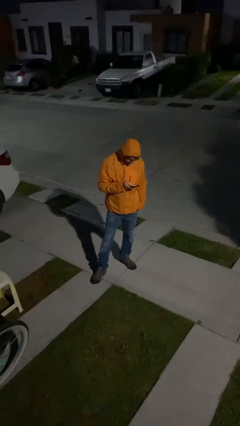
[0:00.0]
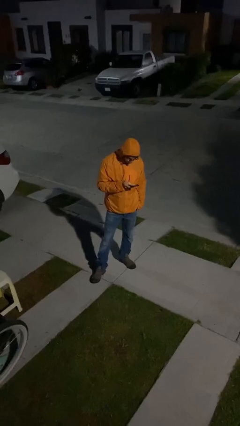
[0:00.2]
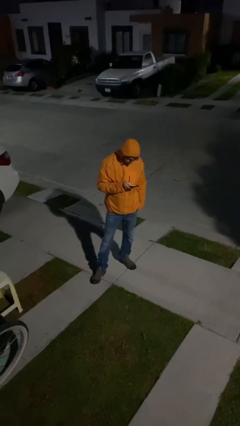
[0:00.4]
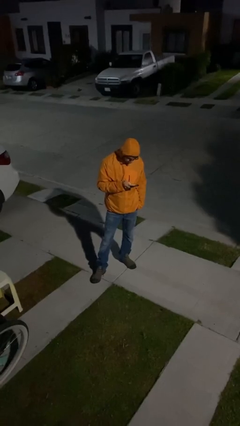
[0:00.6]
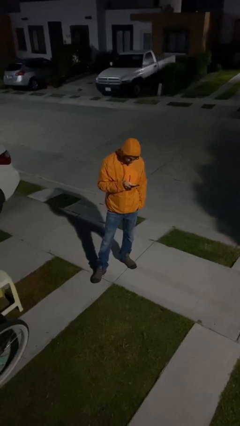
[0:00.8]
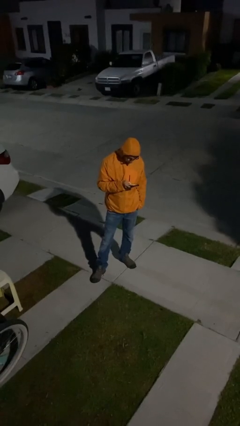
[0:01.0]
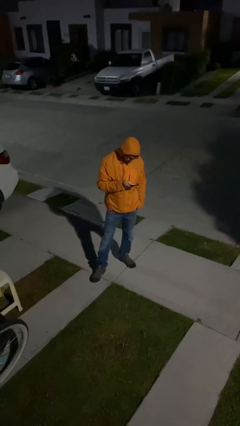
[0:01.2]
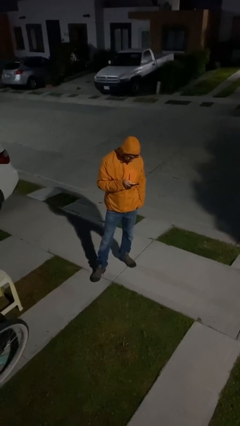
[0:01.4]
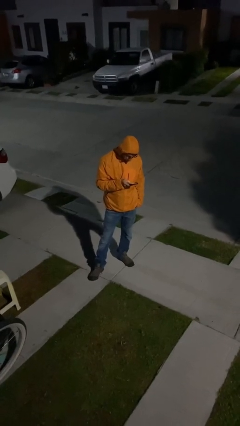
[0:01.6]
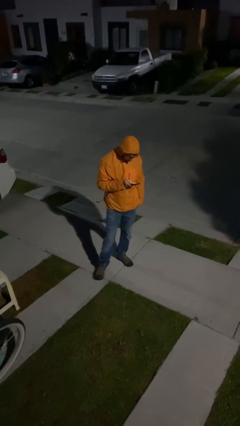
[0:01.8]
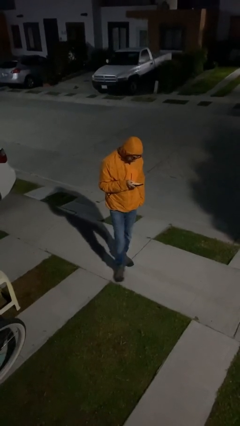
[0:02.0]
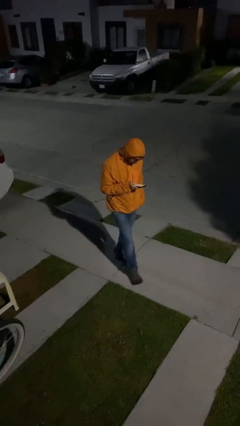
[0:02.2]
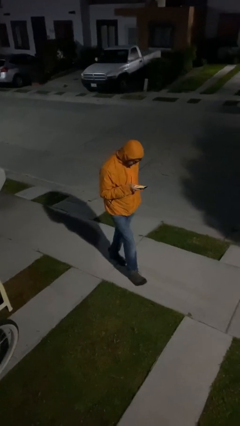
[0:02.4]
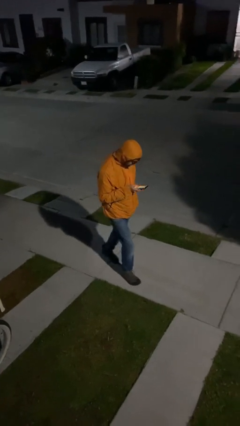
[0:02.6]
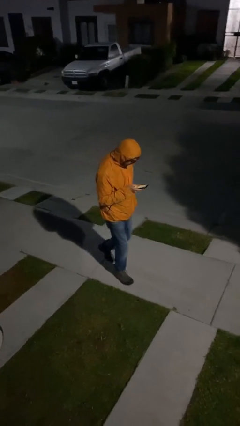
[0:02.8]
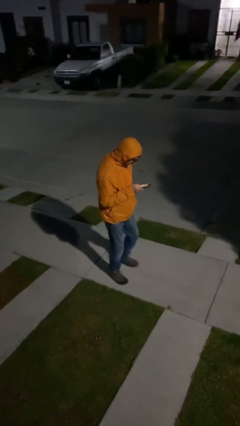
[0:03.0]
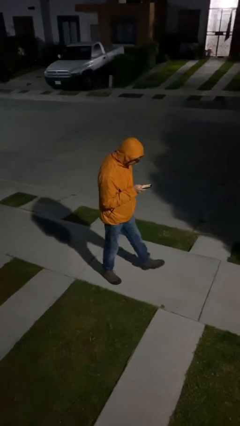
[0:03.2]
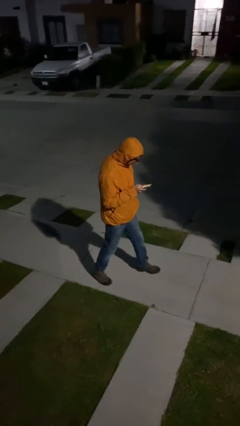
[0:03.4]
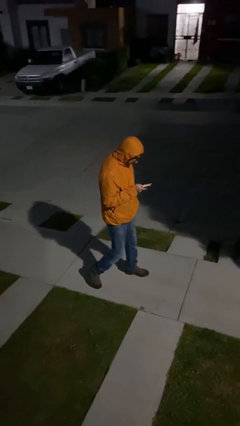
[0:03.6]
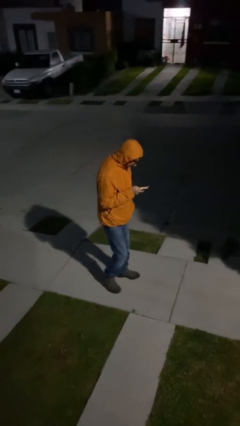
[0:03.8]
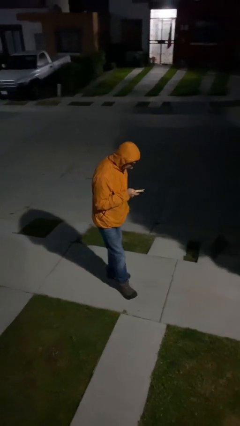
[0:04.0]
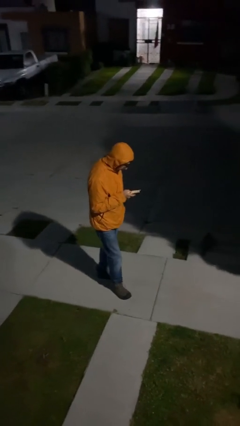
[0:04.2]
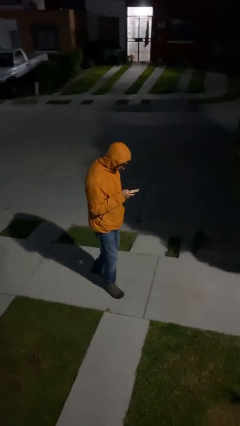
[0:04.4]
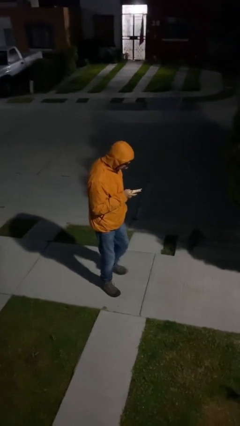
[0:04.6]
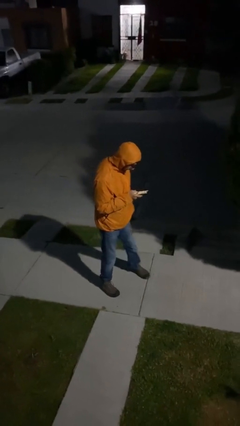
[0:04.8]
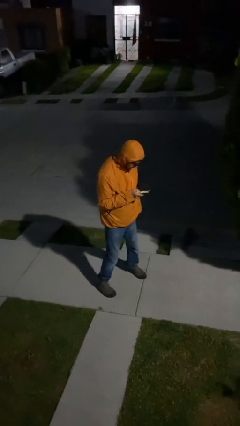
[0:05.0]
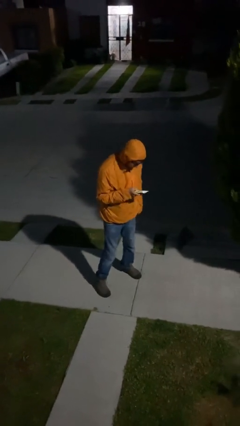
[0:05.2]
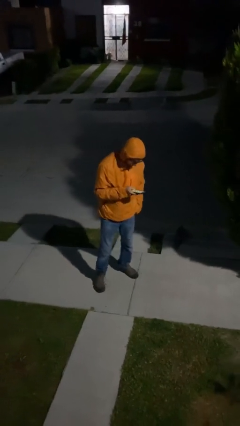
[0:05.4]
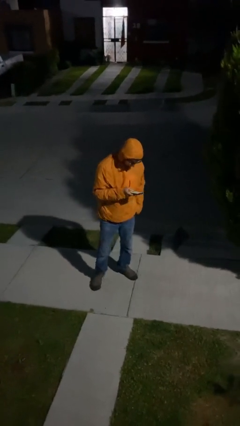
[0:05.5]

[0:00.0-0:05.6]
person texts on phone

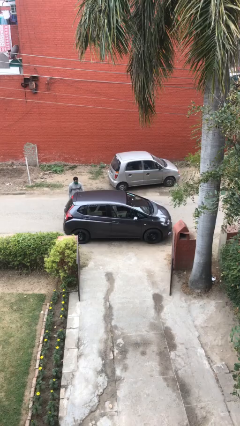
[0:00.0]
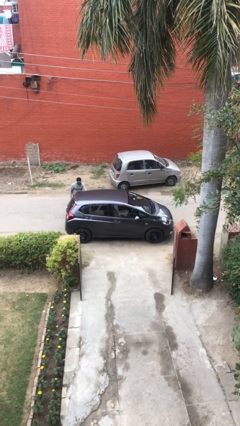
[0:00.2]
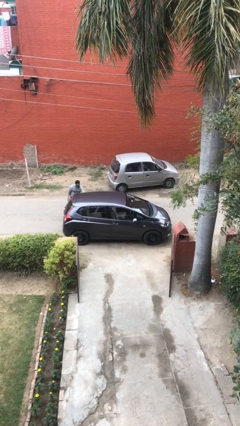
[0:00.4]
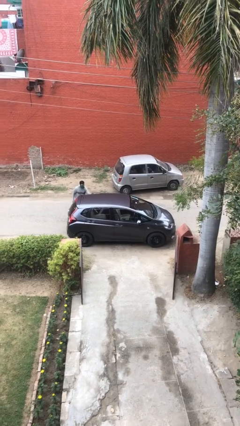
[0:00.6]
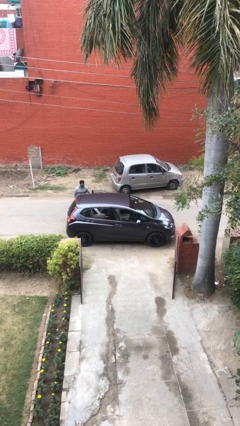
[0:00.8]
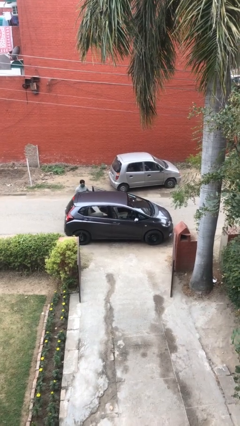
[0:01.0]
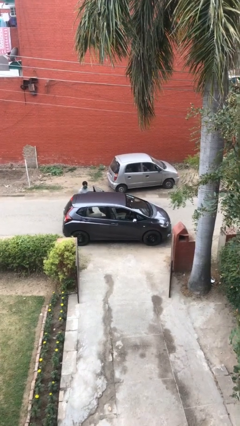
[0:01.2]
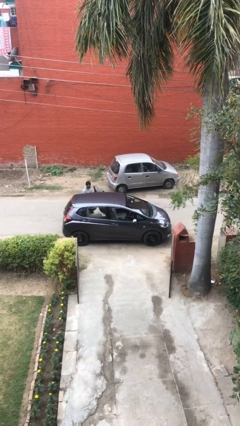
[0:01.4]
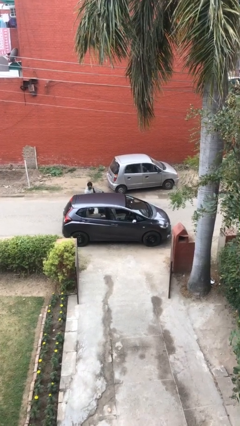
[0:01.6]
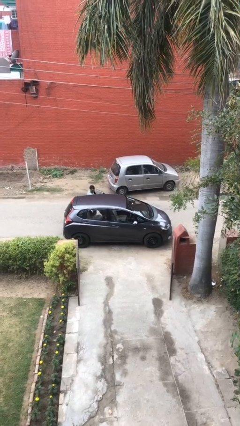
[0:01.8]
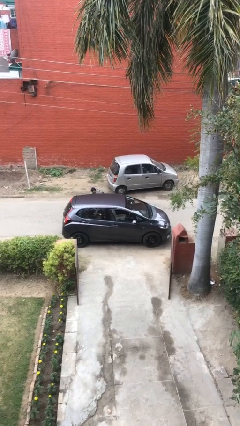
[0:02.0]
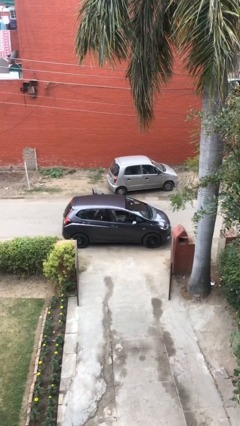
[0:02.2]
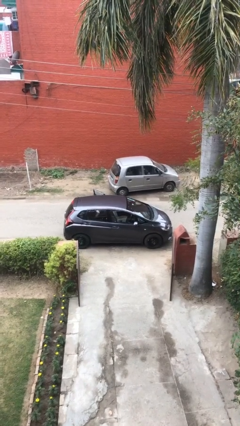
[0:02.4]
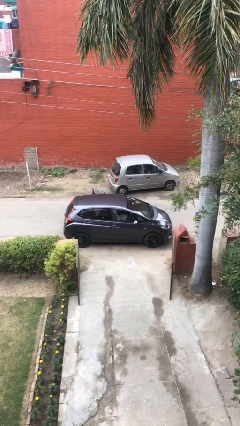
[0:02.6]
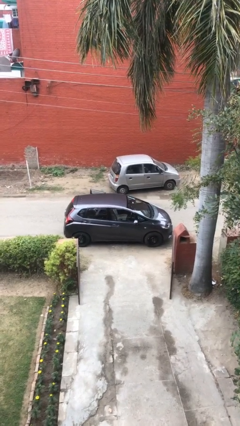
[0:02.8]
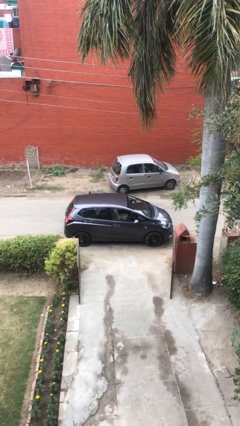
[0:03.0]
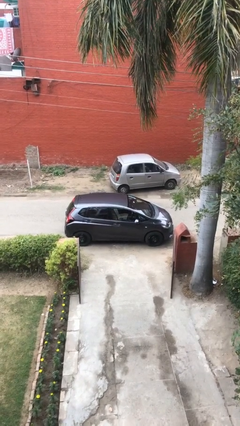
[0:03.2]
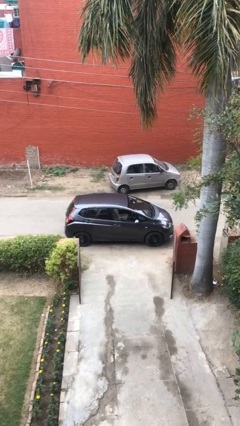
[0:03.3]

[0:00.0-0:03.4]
car picks up person

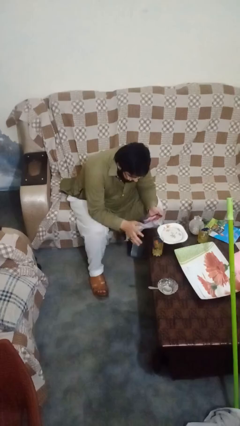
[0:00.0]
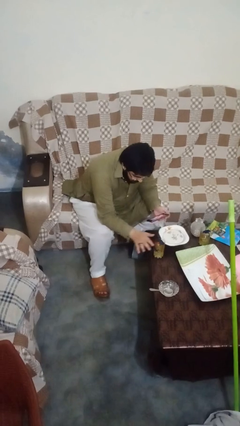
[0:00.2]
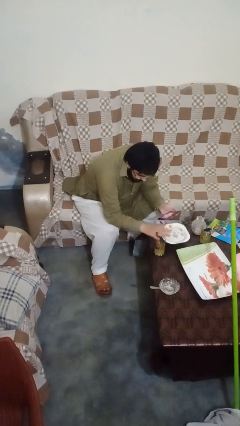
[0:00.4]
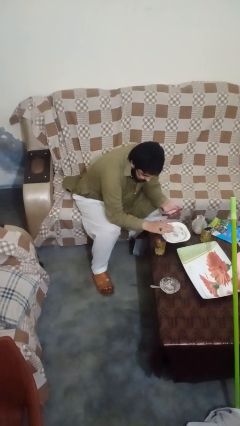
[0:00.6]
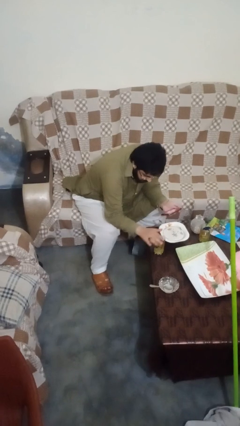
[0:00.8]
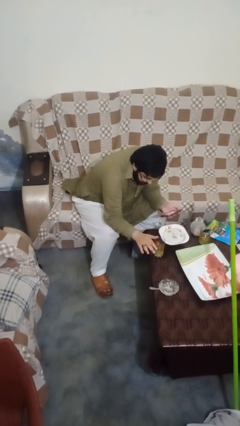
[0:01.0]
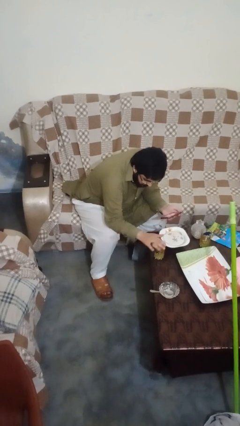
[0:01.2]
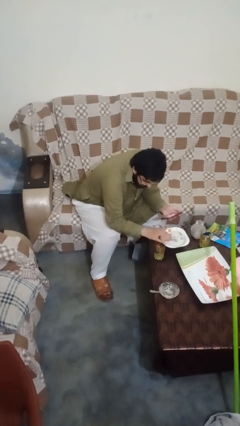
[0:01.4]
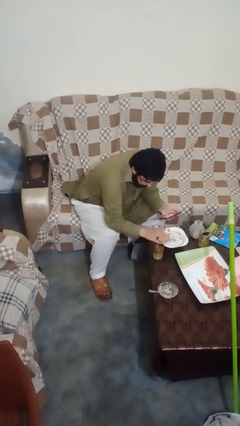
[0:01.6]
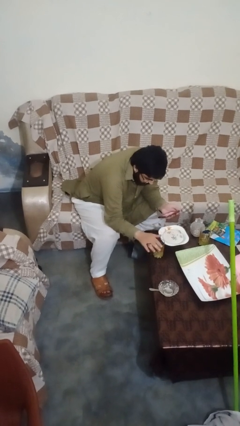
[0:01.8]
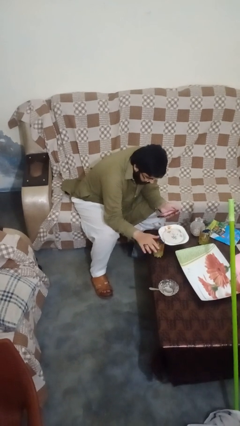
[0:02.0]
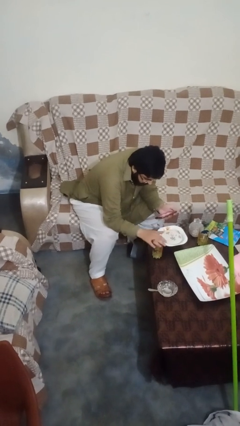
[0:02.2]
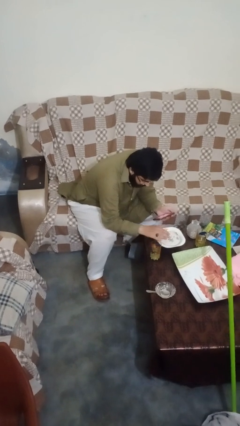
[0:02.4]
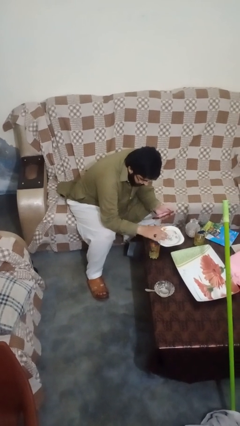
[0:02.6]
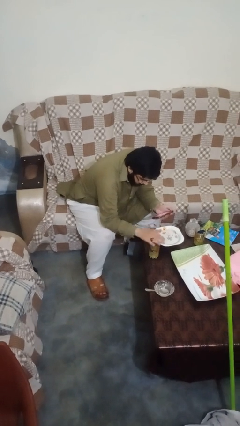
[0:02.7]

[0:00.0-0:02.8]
person waves hand over object

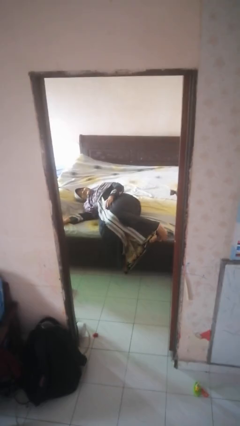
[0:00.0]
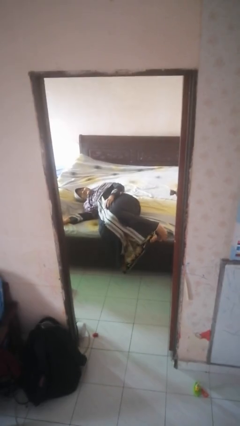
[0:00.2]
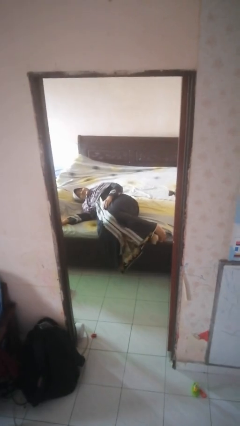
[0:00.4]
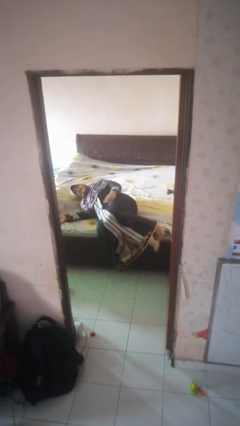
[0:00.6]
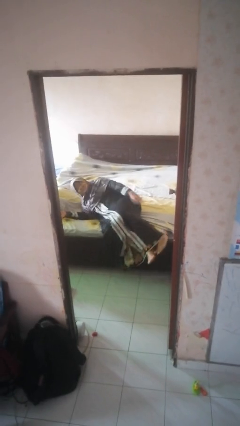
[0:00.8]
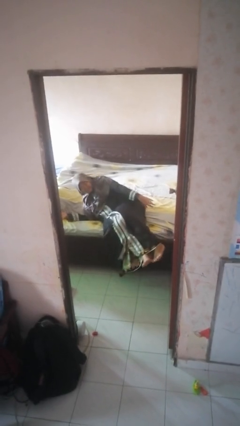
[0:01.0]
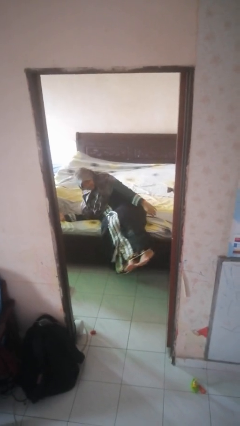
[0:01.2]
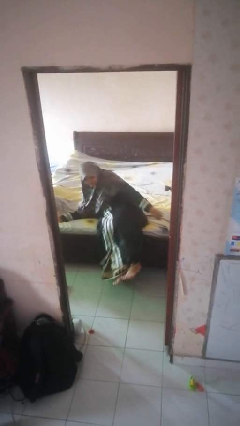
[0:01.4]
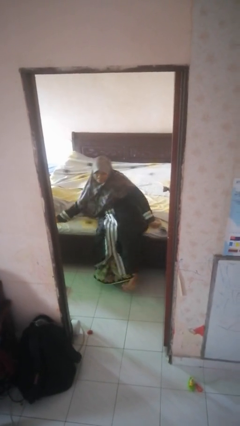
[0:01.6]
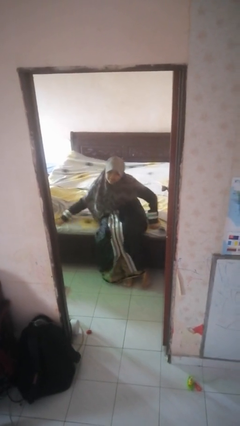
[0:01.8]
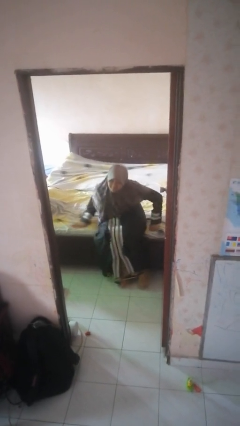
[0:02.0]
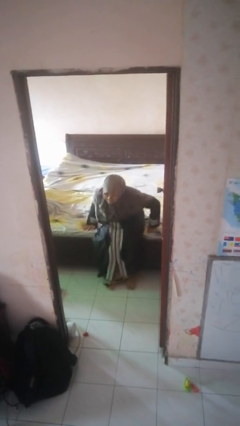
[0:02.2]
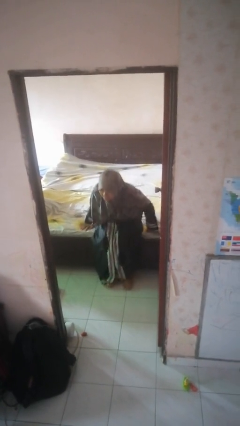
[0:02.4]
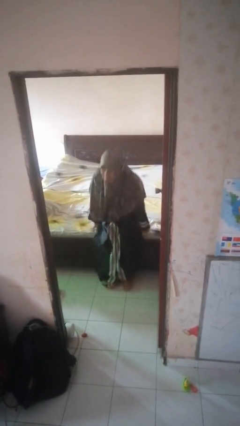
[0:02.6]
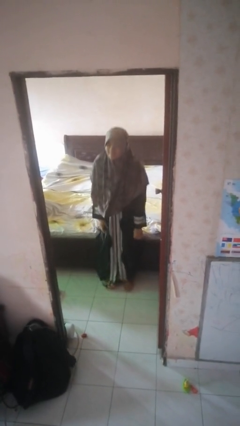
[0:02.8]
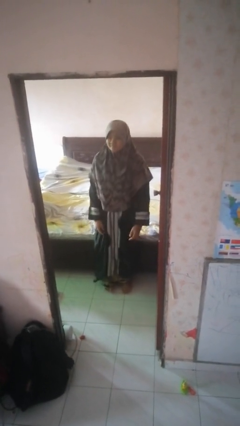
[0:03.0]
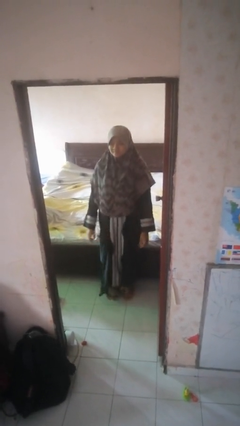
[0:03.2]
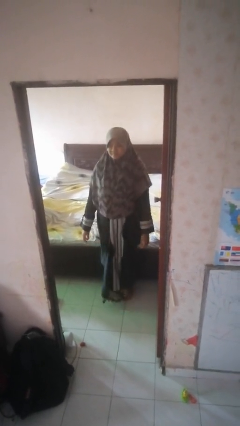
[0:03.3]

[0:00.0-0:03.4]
person stands up

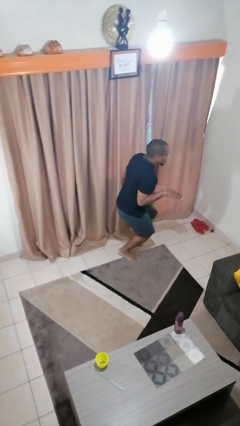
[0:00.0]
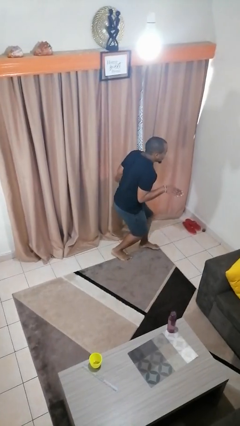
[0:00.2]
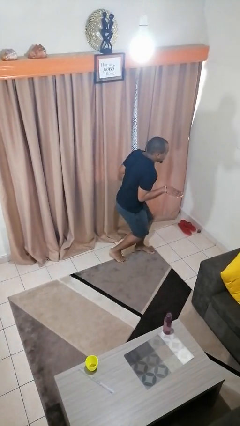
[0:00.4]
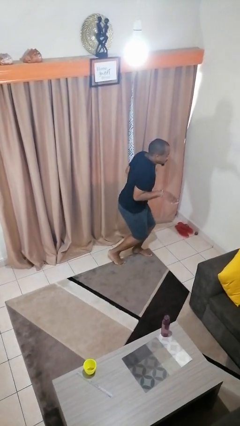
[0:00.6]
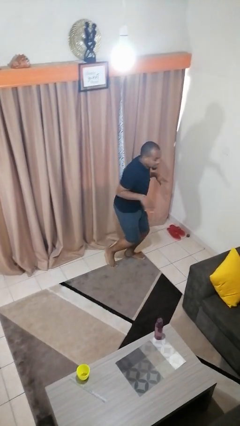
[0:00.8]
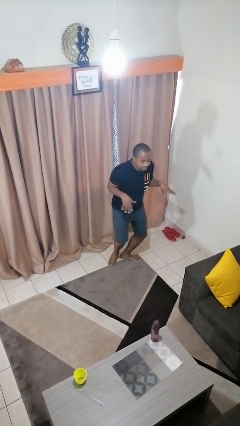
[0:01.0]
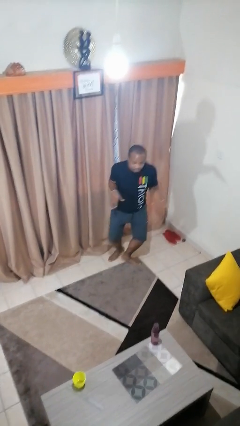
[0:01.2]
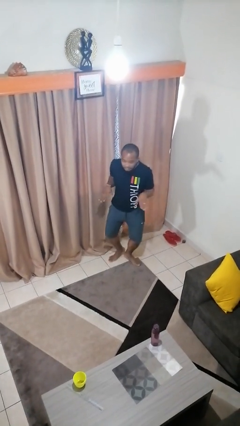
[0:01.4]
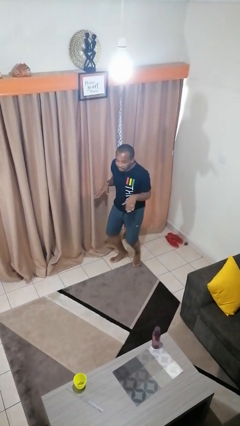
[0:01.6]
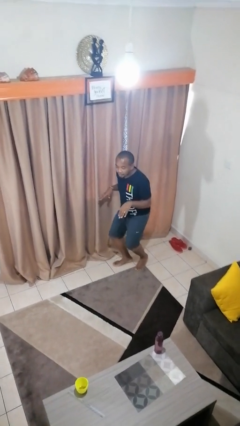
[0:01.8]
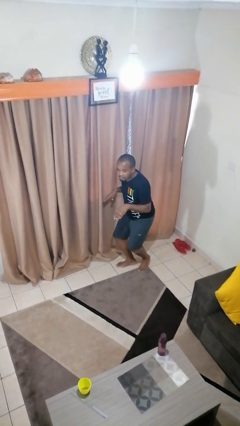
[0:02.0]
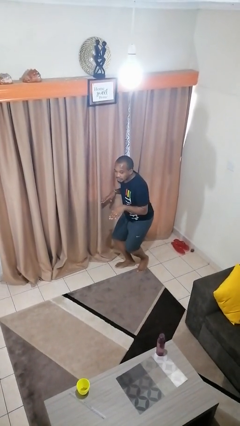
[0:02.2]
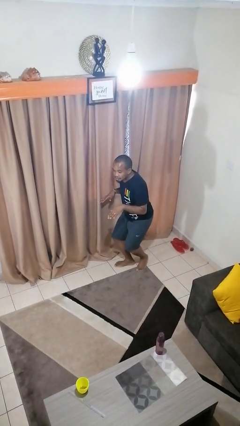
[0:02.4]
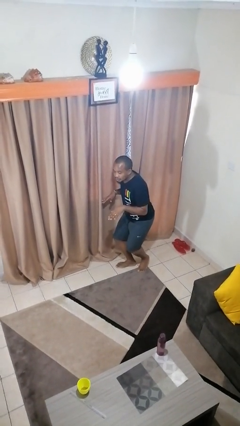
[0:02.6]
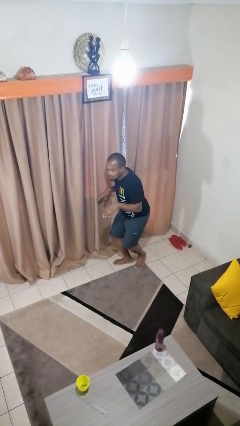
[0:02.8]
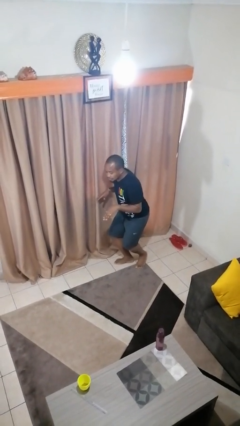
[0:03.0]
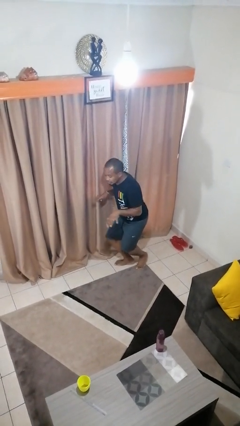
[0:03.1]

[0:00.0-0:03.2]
person picks up object from floor
